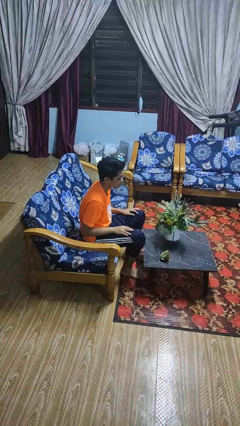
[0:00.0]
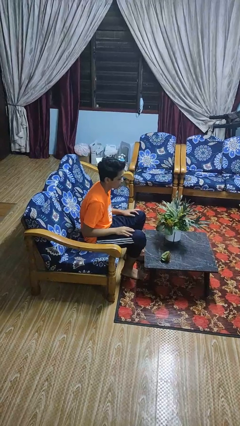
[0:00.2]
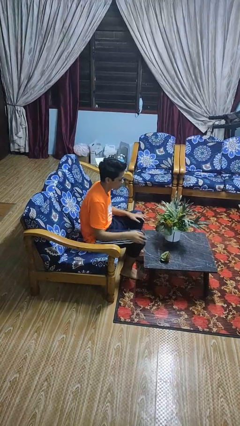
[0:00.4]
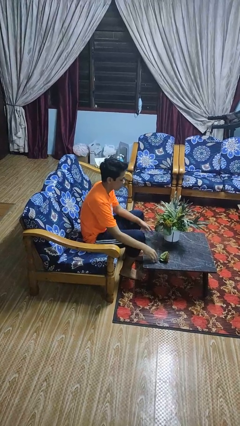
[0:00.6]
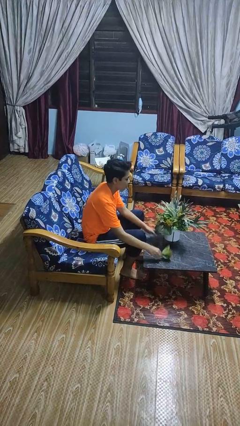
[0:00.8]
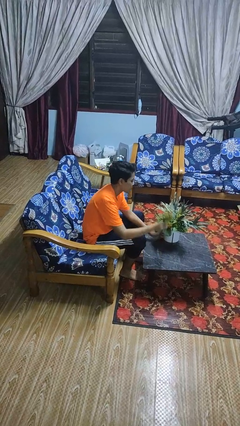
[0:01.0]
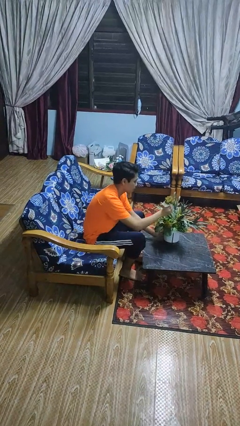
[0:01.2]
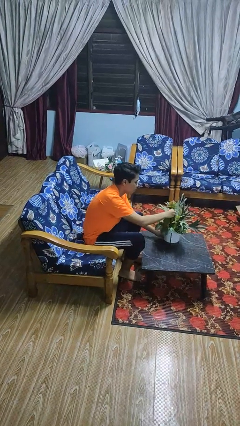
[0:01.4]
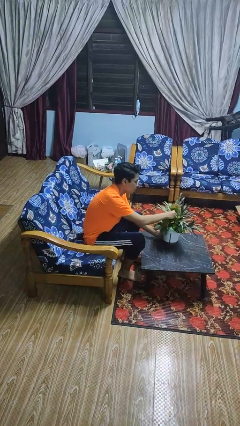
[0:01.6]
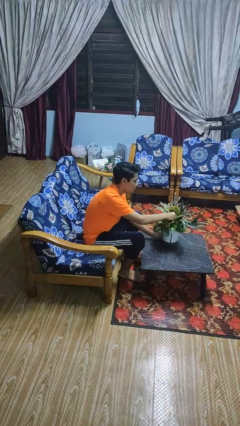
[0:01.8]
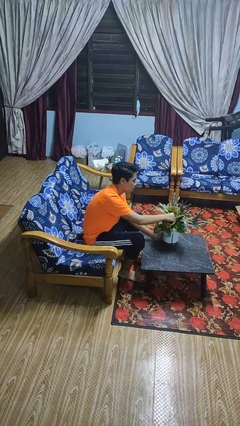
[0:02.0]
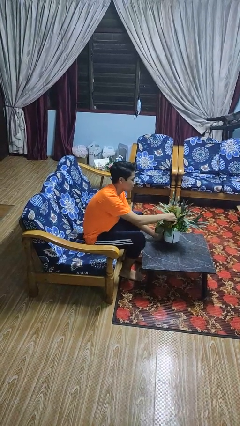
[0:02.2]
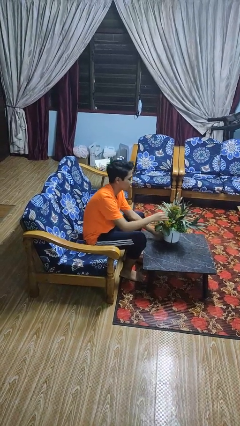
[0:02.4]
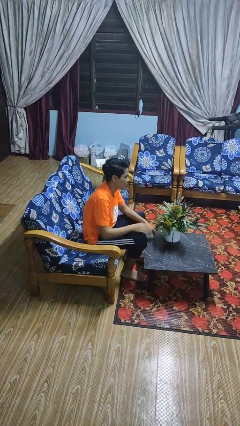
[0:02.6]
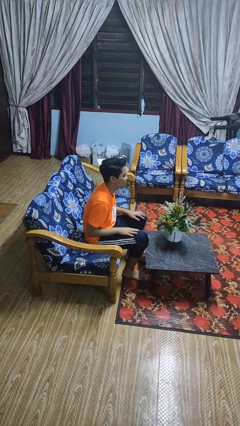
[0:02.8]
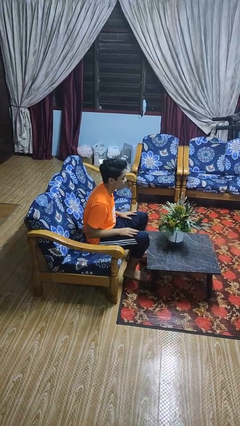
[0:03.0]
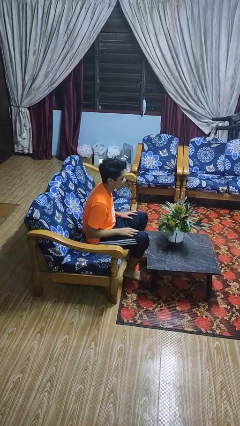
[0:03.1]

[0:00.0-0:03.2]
person arranges flowers in vase

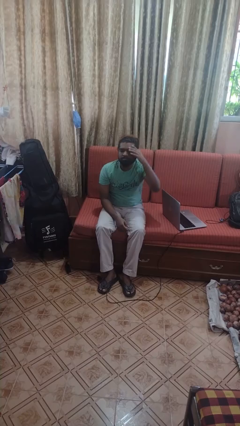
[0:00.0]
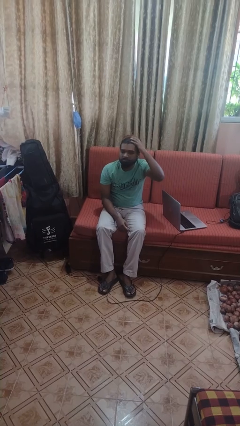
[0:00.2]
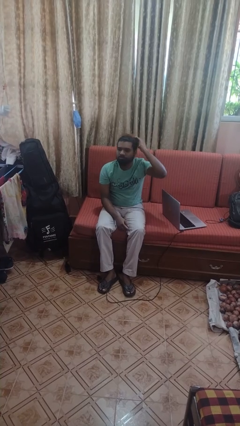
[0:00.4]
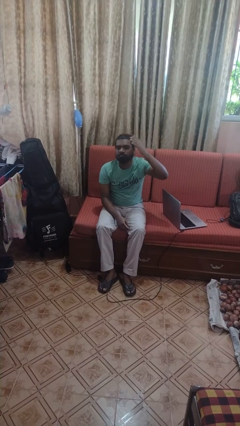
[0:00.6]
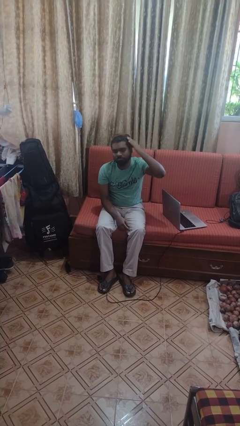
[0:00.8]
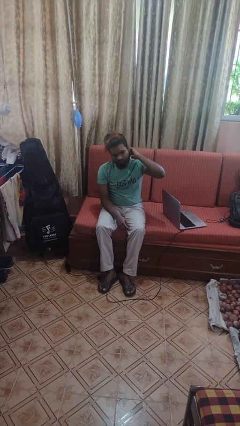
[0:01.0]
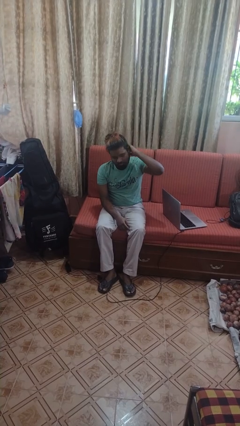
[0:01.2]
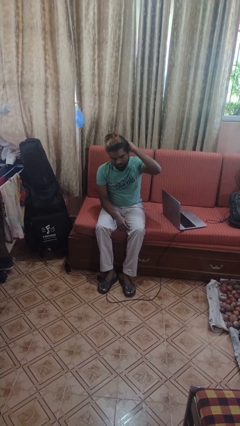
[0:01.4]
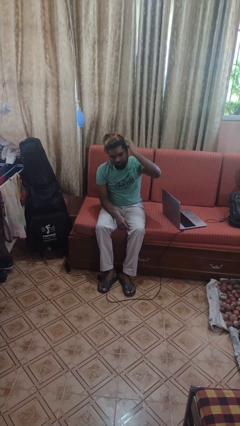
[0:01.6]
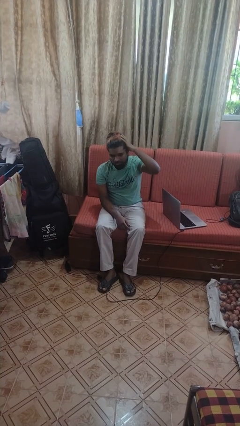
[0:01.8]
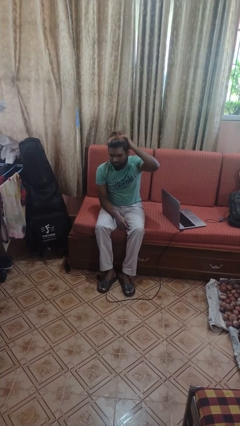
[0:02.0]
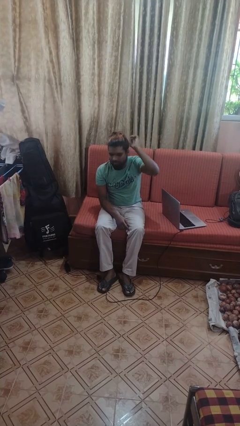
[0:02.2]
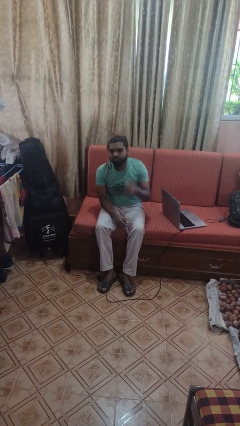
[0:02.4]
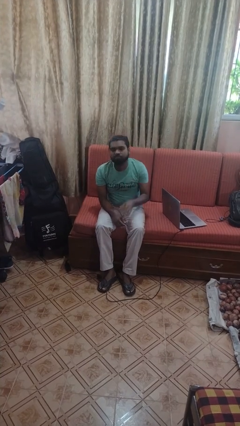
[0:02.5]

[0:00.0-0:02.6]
person strokes hair

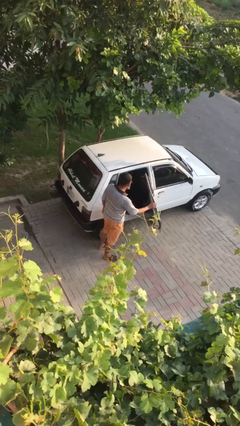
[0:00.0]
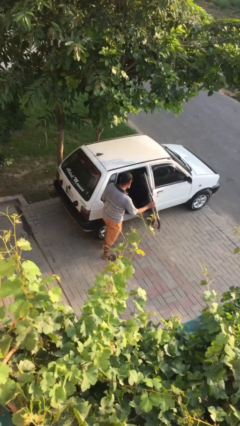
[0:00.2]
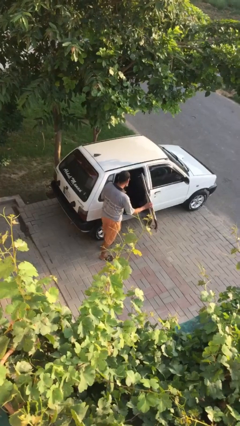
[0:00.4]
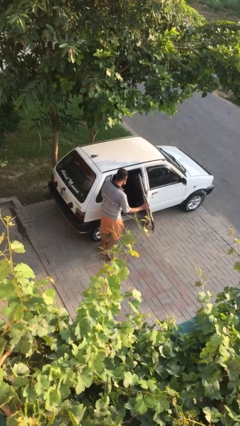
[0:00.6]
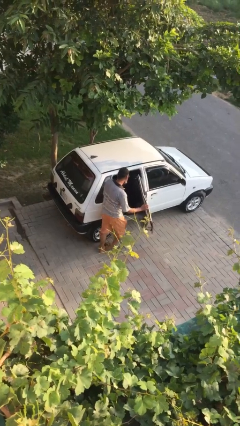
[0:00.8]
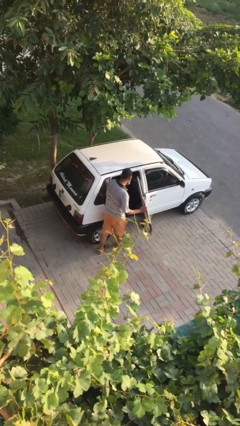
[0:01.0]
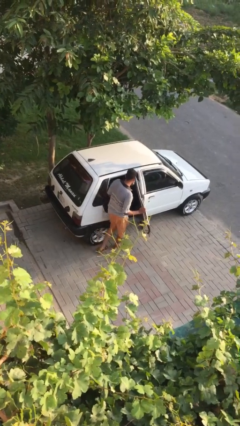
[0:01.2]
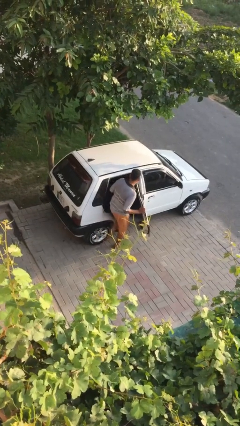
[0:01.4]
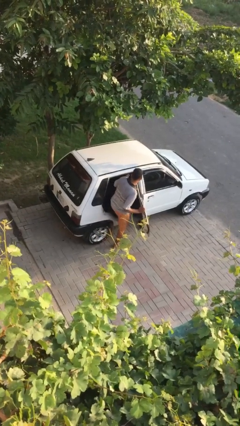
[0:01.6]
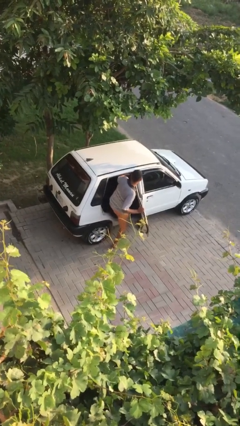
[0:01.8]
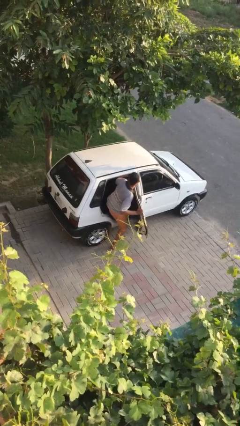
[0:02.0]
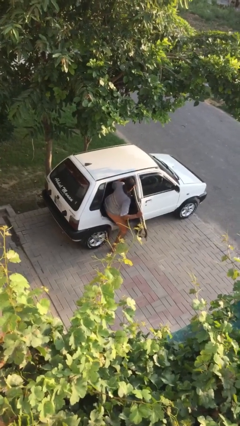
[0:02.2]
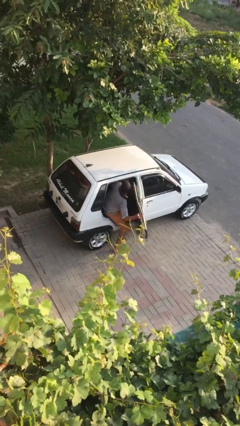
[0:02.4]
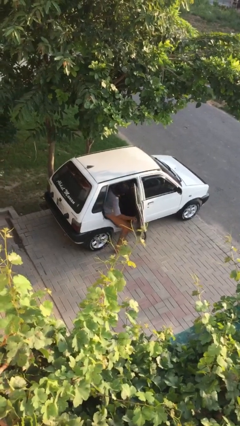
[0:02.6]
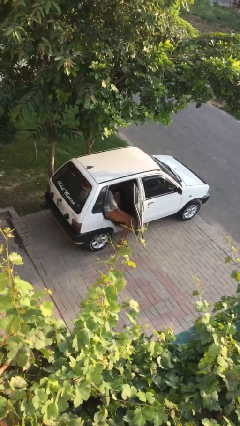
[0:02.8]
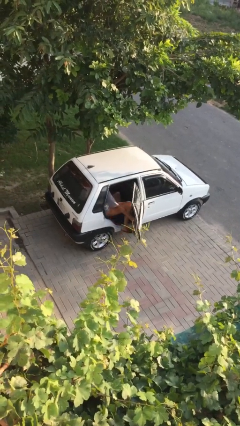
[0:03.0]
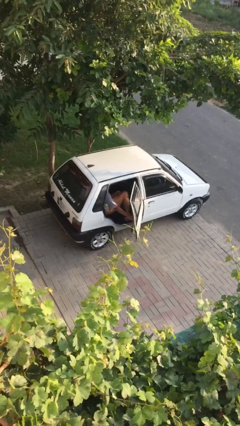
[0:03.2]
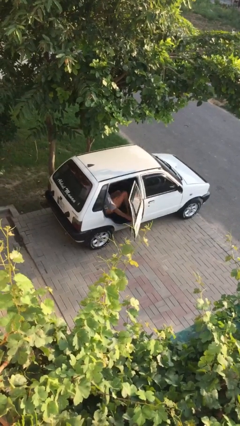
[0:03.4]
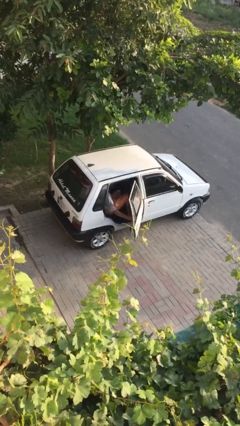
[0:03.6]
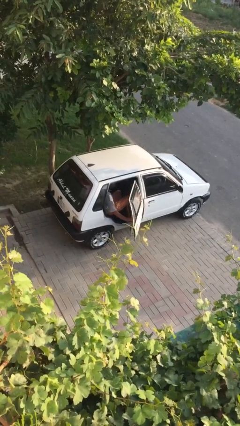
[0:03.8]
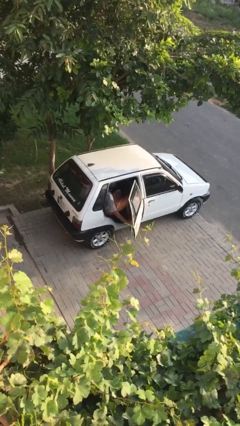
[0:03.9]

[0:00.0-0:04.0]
person enters car

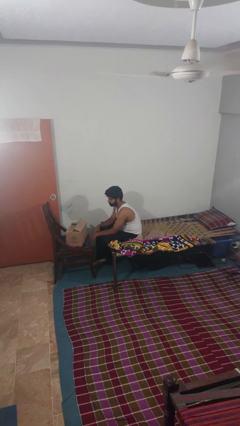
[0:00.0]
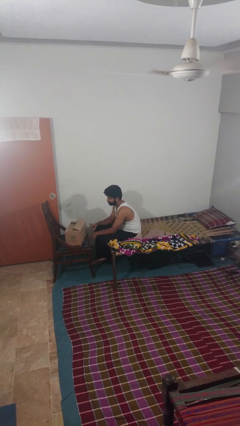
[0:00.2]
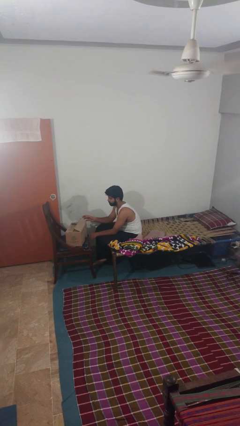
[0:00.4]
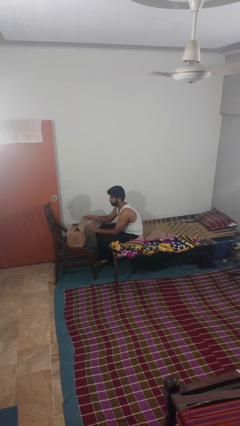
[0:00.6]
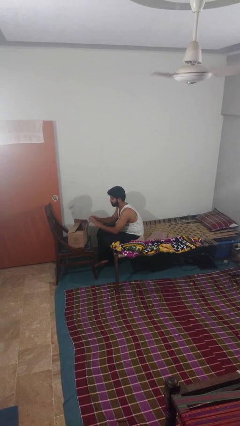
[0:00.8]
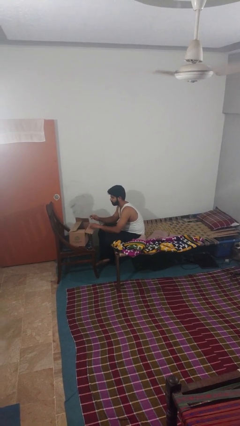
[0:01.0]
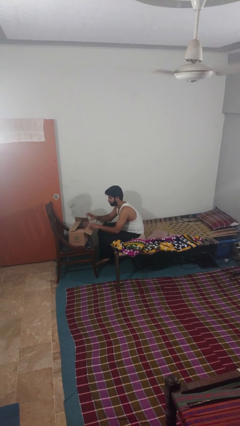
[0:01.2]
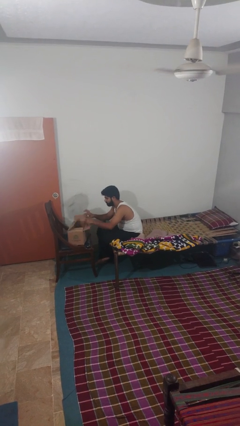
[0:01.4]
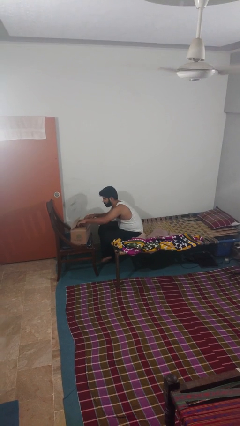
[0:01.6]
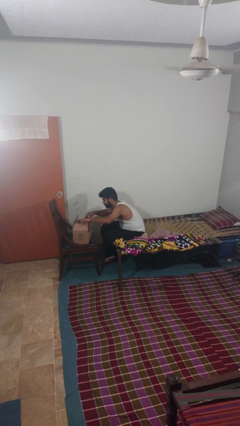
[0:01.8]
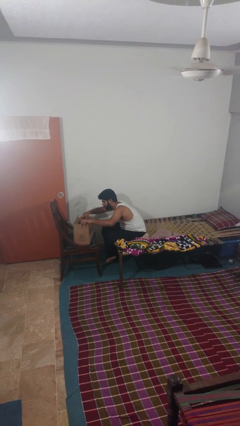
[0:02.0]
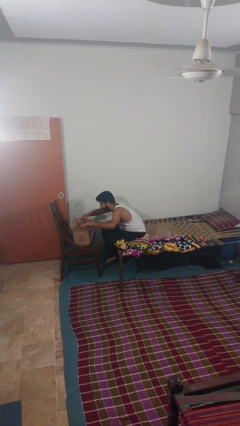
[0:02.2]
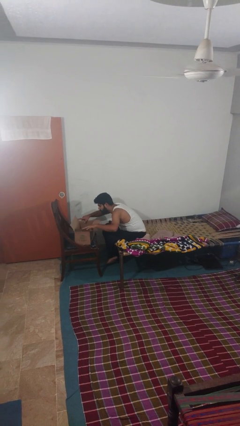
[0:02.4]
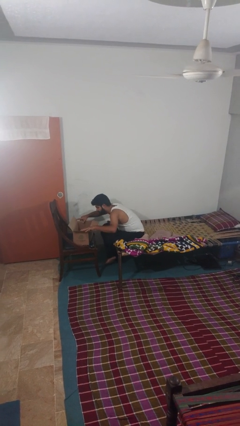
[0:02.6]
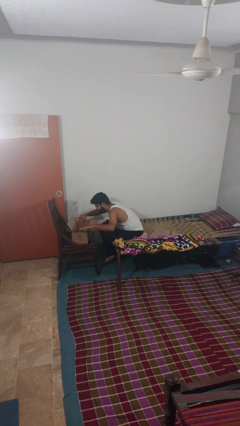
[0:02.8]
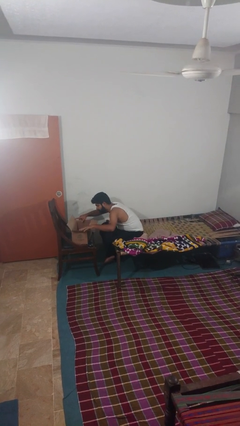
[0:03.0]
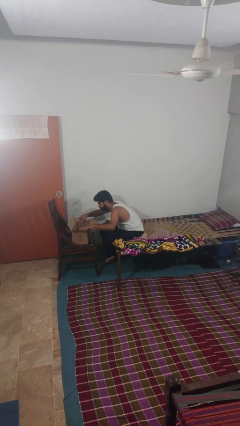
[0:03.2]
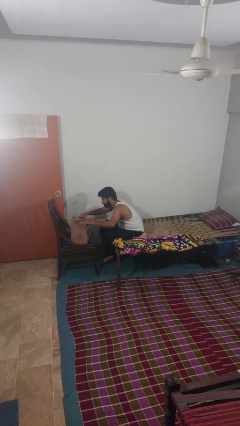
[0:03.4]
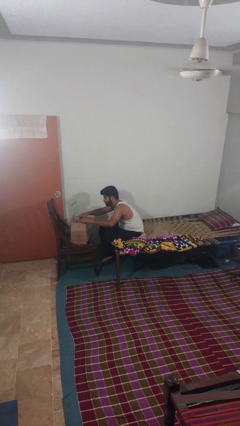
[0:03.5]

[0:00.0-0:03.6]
person opens box

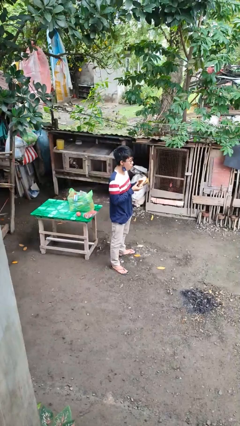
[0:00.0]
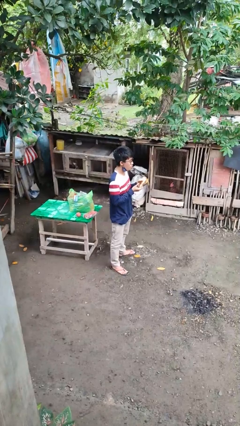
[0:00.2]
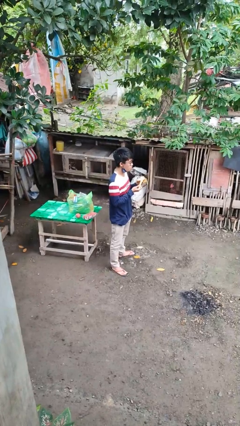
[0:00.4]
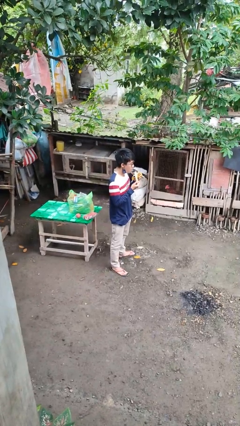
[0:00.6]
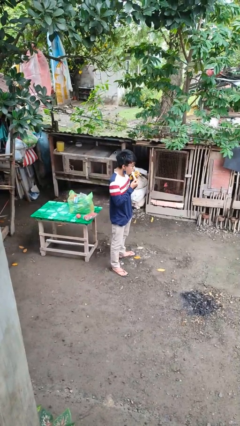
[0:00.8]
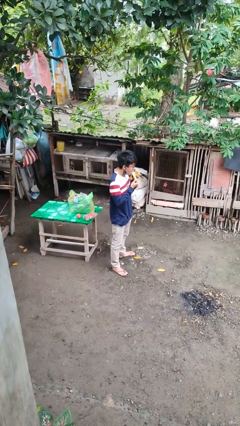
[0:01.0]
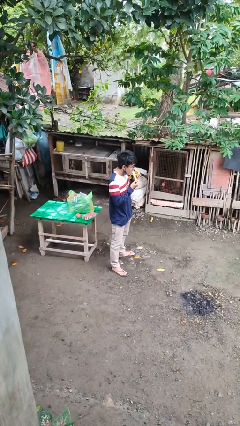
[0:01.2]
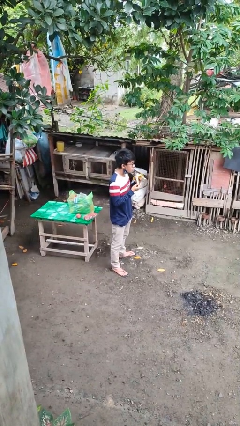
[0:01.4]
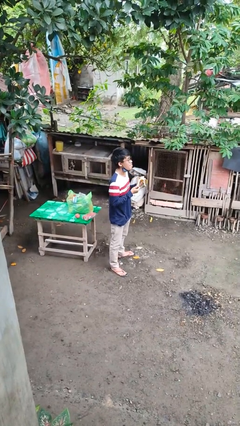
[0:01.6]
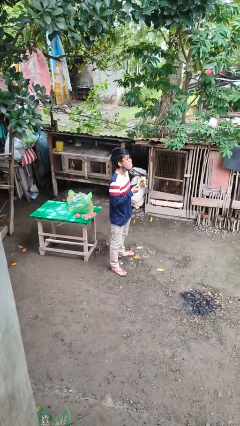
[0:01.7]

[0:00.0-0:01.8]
person eats banana

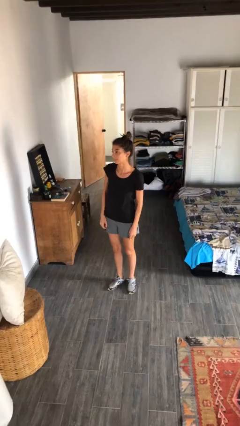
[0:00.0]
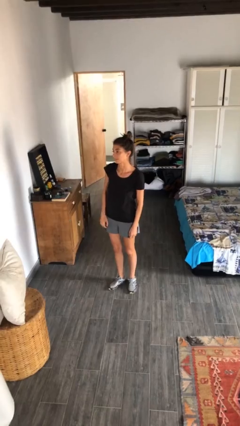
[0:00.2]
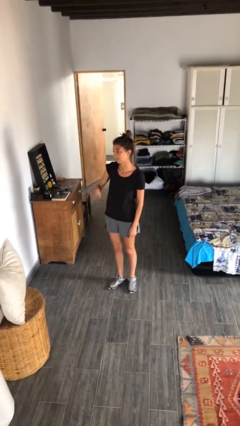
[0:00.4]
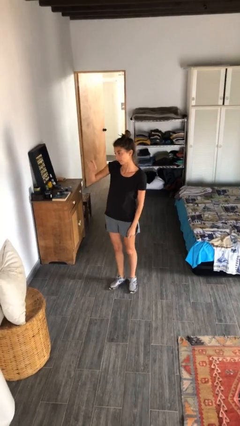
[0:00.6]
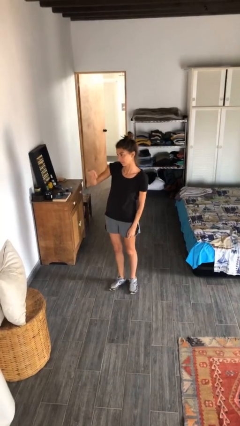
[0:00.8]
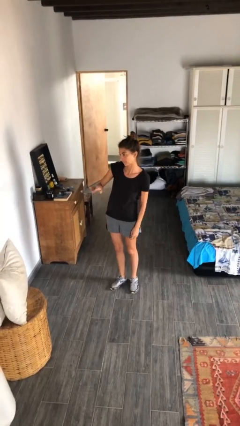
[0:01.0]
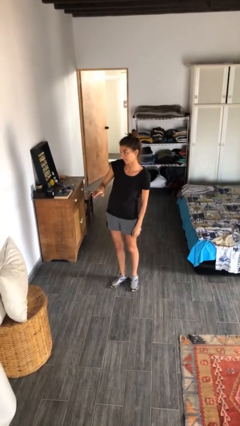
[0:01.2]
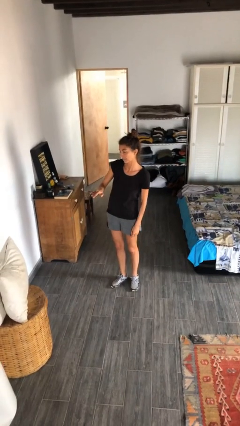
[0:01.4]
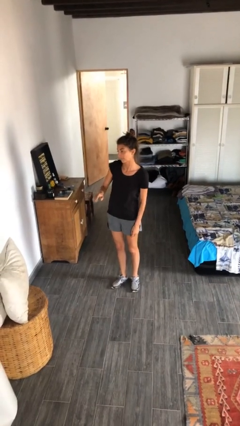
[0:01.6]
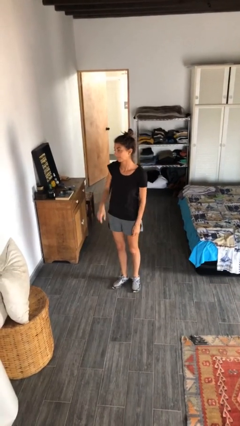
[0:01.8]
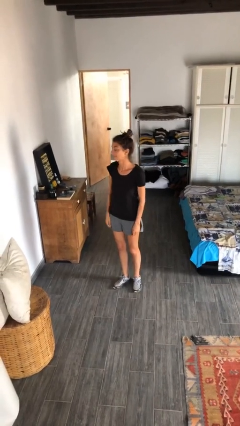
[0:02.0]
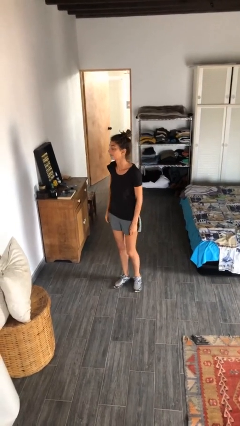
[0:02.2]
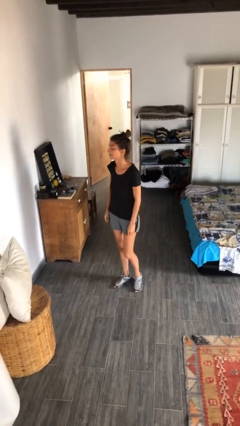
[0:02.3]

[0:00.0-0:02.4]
person gestures swipe down
